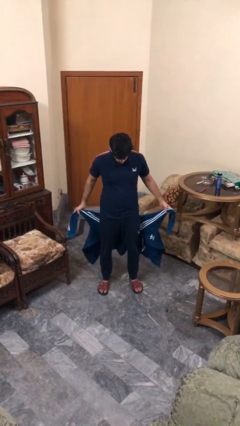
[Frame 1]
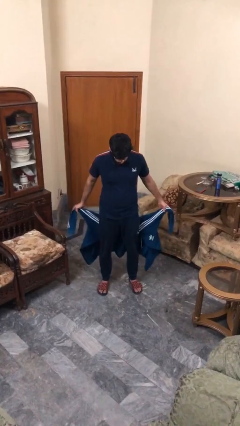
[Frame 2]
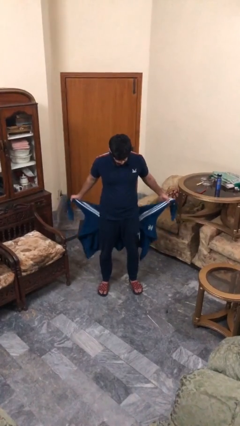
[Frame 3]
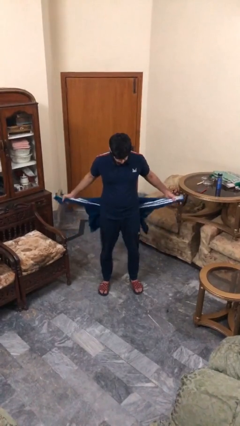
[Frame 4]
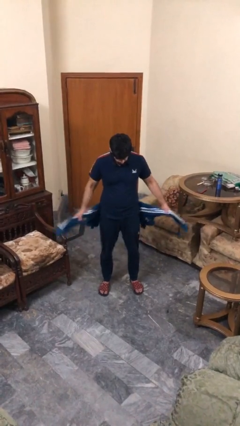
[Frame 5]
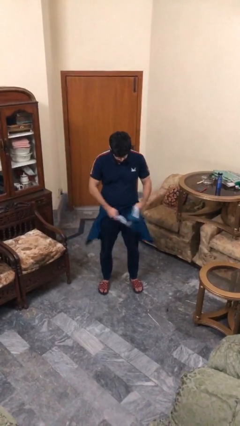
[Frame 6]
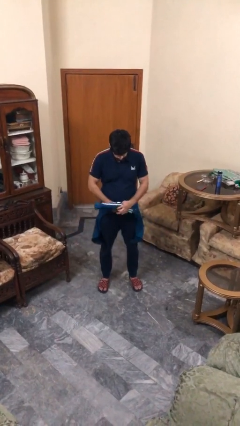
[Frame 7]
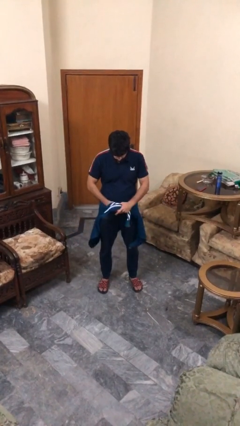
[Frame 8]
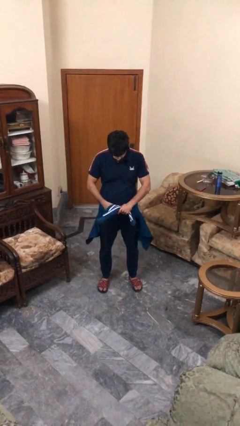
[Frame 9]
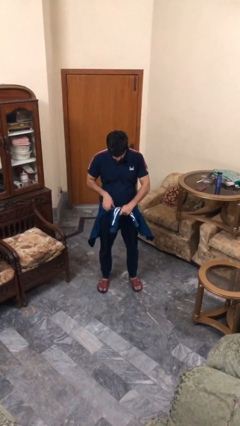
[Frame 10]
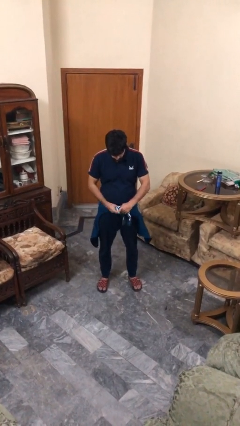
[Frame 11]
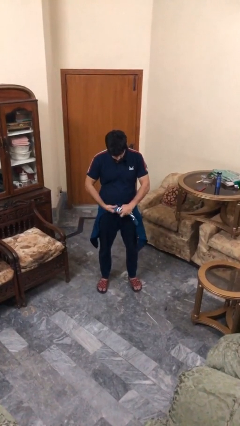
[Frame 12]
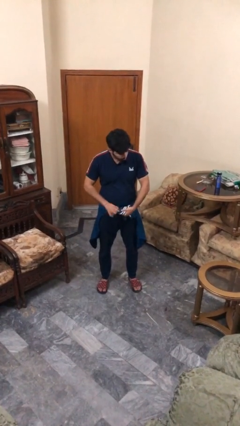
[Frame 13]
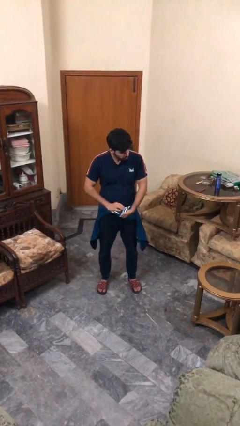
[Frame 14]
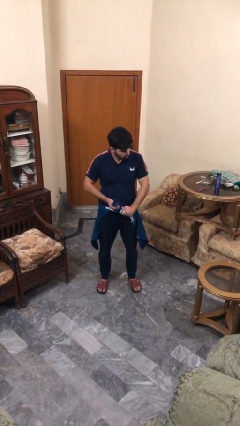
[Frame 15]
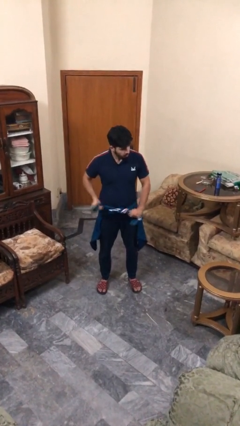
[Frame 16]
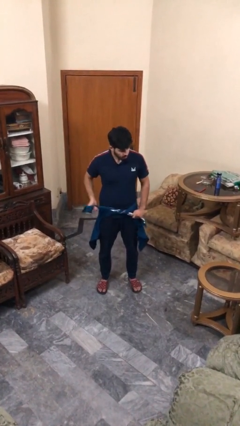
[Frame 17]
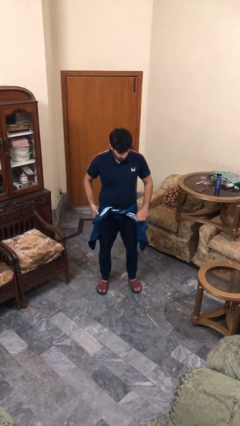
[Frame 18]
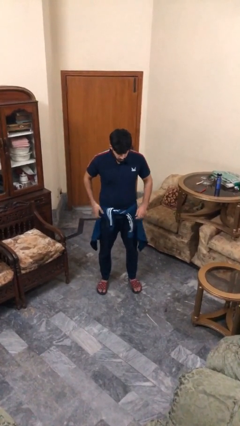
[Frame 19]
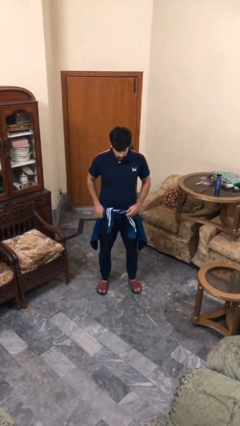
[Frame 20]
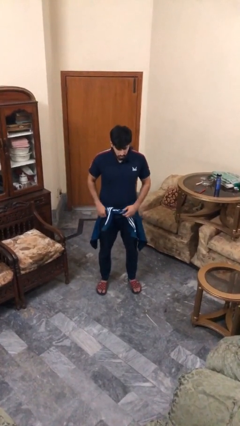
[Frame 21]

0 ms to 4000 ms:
person ties jacket around waist

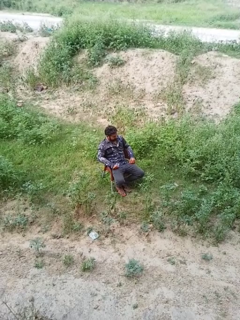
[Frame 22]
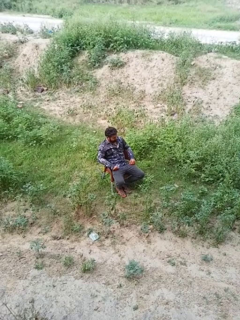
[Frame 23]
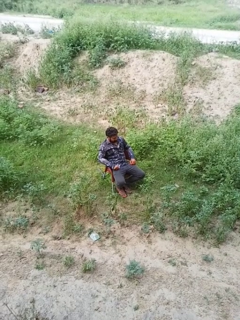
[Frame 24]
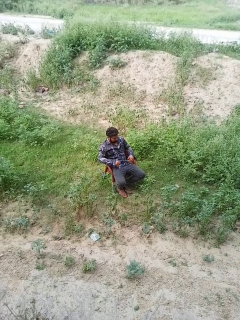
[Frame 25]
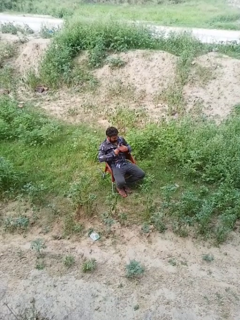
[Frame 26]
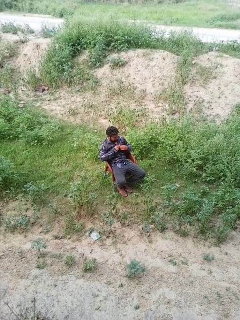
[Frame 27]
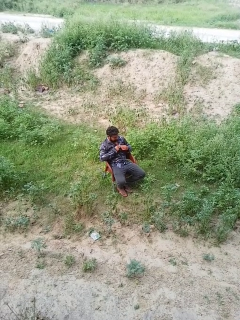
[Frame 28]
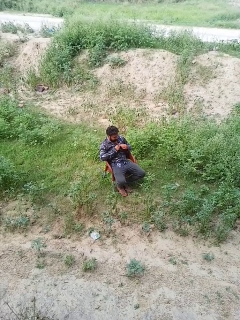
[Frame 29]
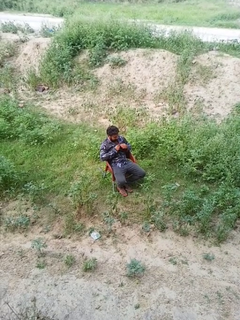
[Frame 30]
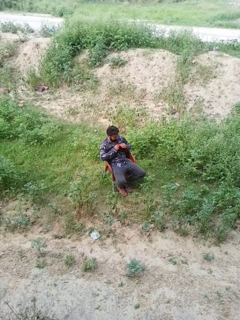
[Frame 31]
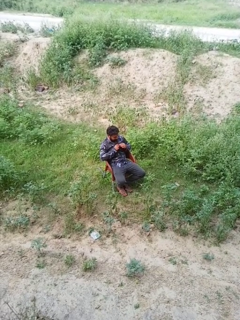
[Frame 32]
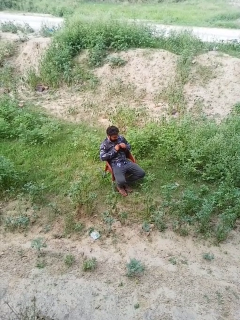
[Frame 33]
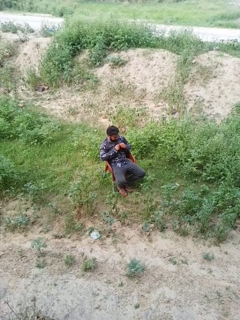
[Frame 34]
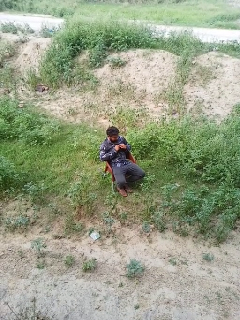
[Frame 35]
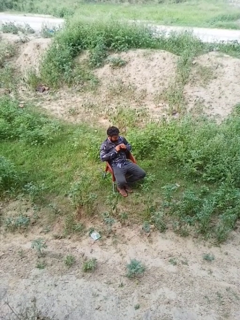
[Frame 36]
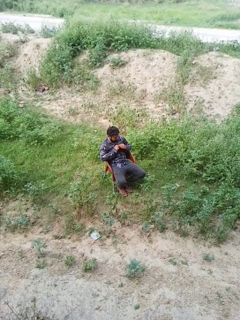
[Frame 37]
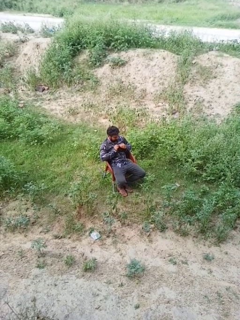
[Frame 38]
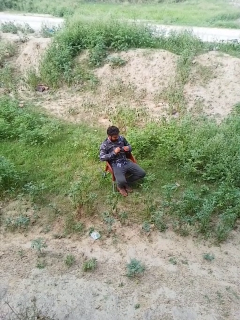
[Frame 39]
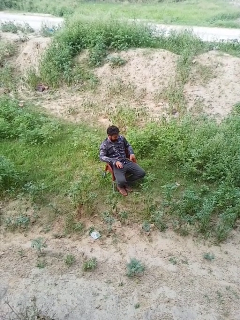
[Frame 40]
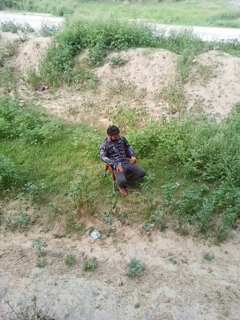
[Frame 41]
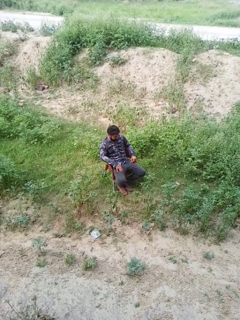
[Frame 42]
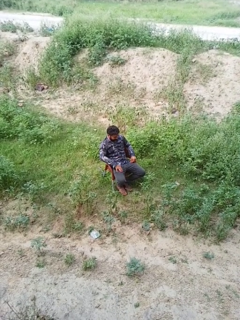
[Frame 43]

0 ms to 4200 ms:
person buttons shirt

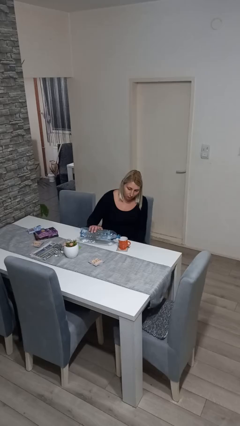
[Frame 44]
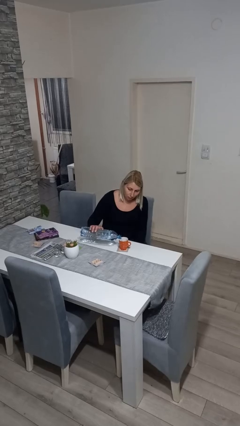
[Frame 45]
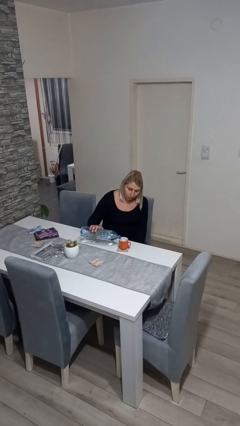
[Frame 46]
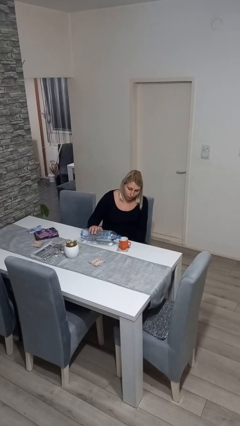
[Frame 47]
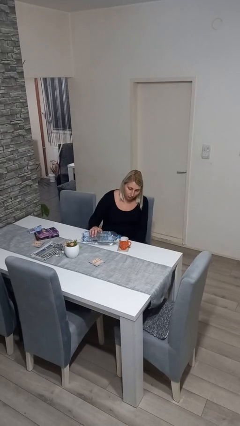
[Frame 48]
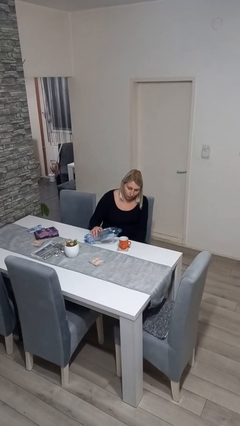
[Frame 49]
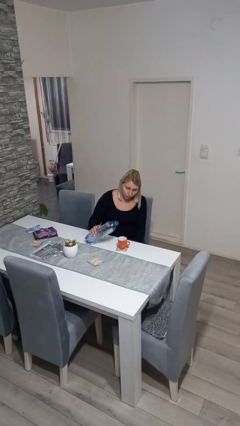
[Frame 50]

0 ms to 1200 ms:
person pours liquid into cup

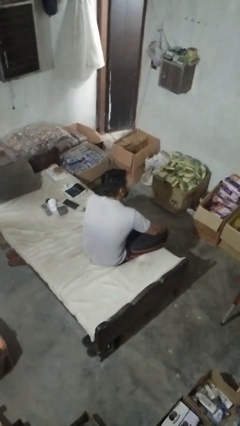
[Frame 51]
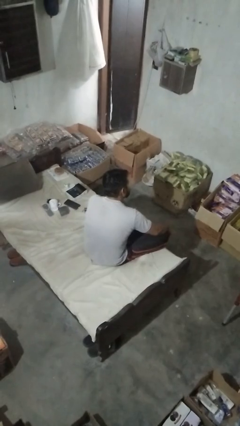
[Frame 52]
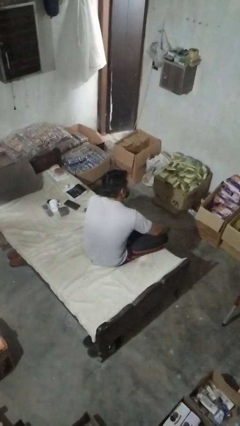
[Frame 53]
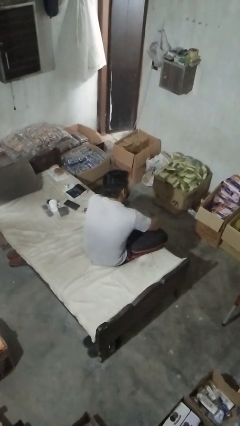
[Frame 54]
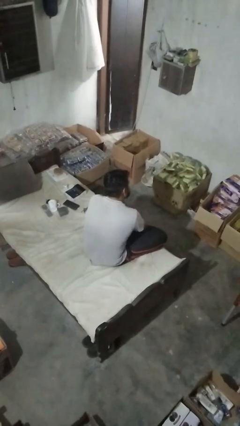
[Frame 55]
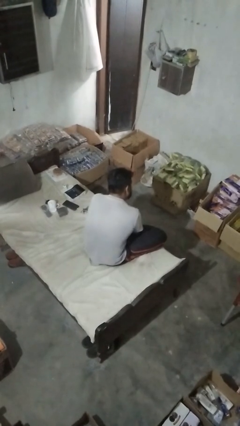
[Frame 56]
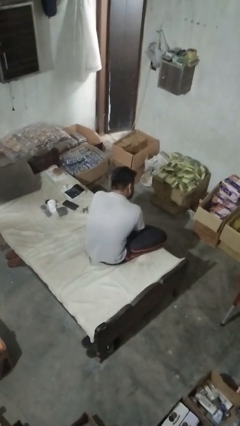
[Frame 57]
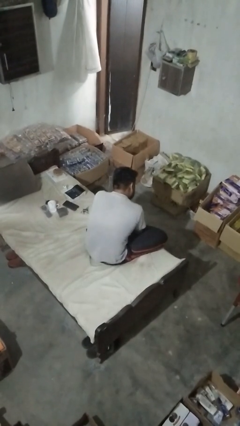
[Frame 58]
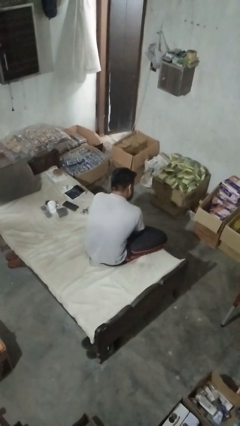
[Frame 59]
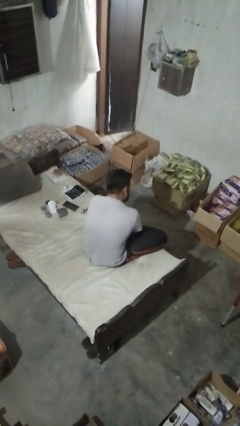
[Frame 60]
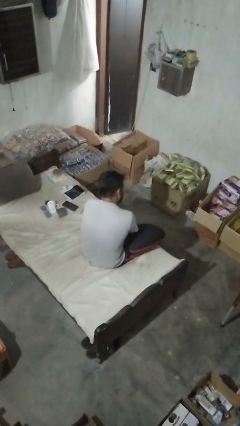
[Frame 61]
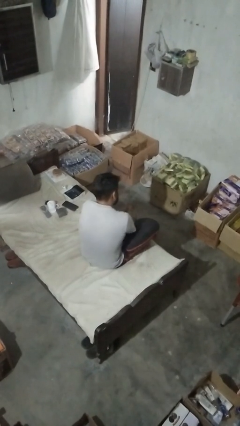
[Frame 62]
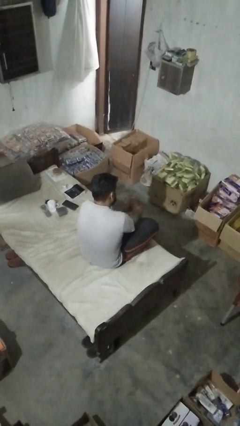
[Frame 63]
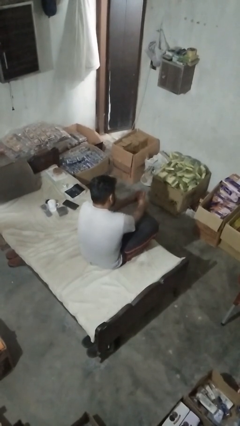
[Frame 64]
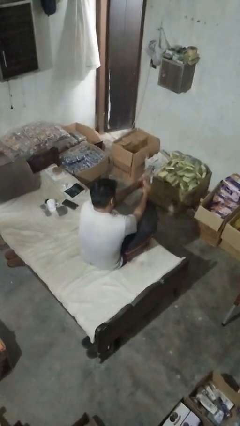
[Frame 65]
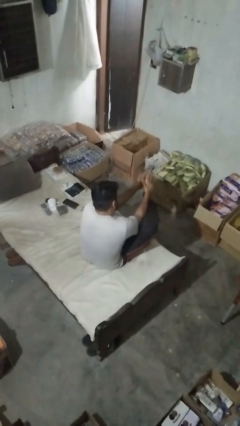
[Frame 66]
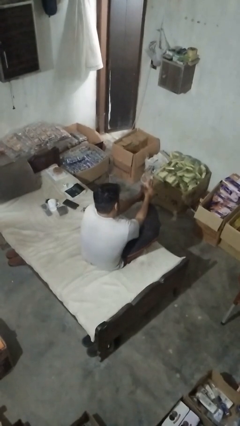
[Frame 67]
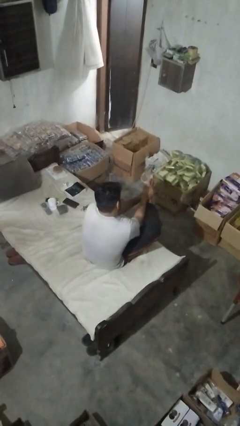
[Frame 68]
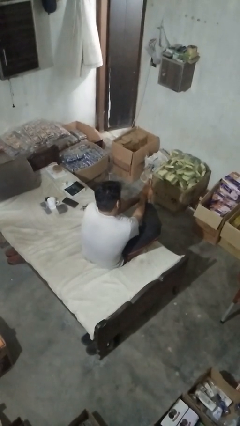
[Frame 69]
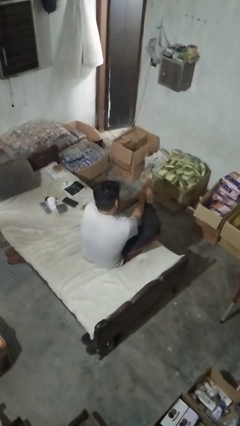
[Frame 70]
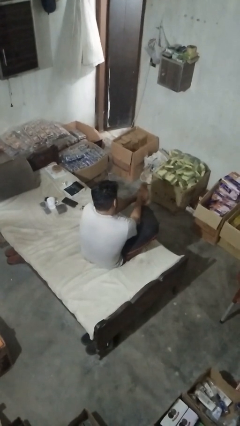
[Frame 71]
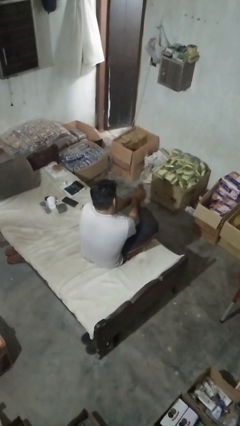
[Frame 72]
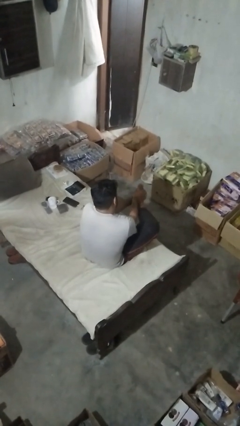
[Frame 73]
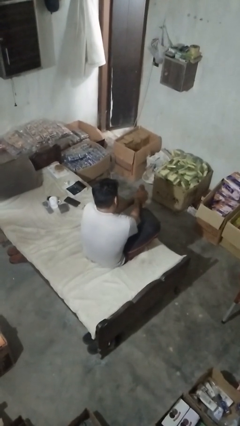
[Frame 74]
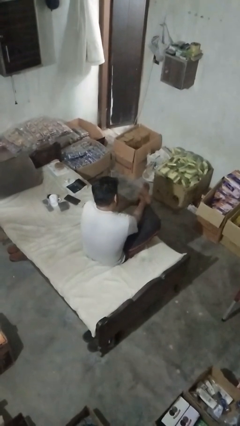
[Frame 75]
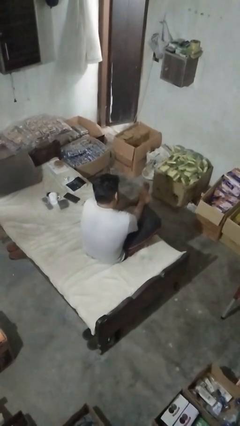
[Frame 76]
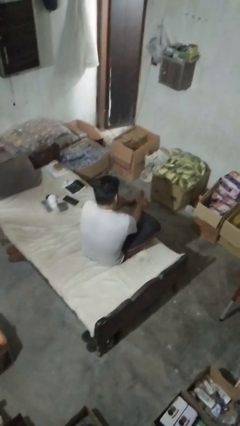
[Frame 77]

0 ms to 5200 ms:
person rubs foot

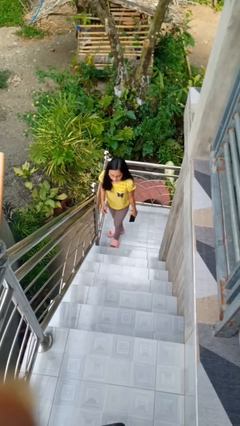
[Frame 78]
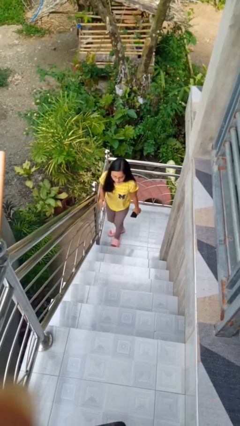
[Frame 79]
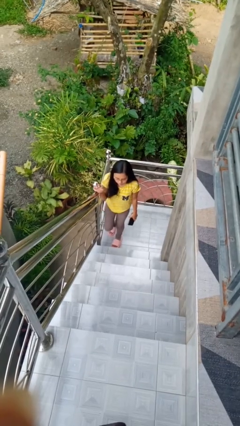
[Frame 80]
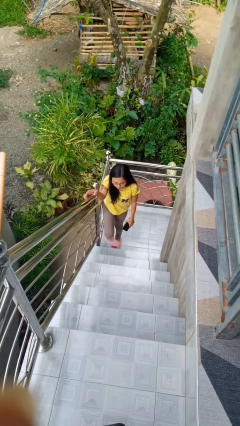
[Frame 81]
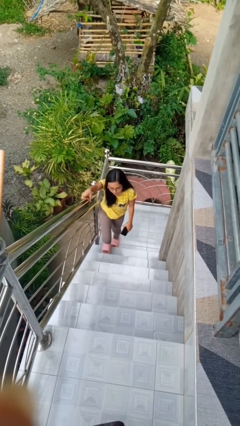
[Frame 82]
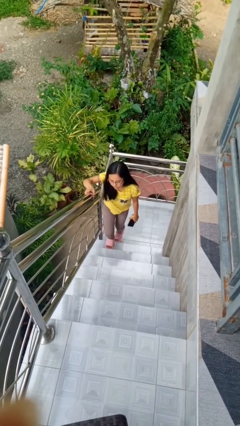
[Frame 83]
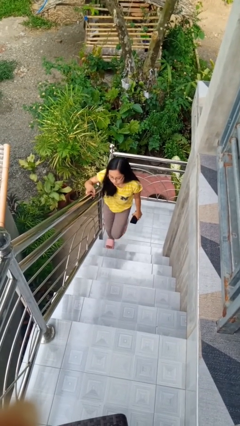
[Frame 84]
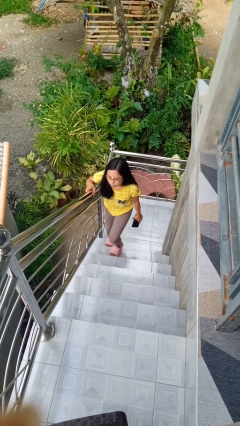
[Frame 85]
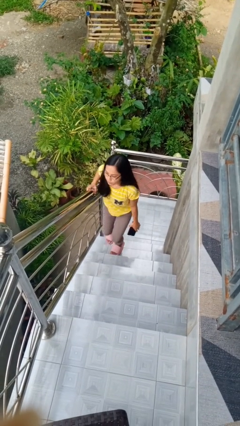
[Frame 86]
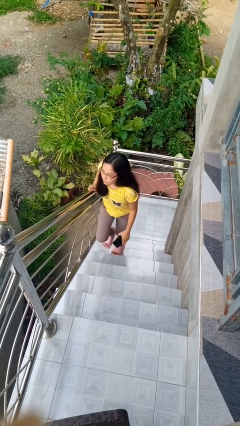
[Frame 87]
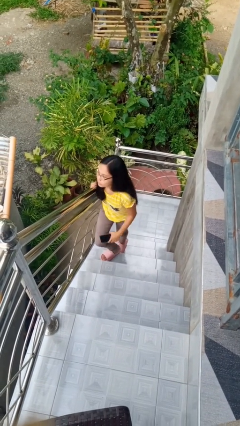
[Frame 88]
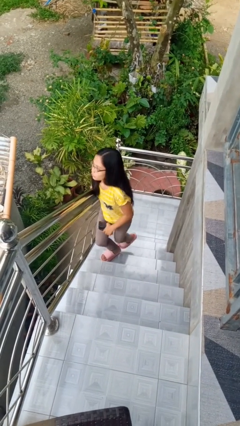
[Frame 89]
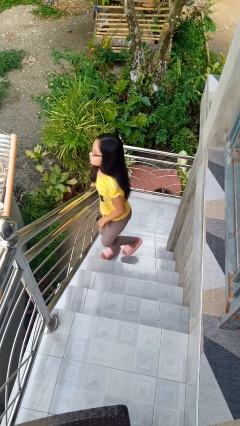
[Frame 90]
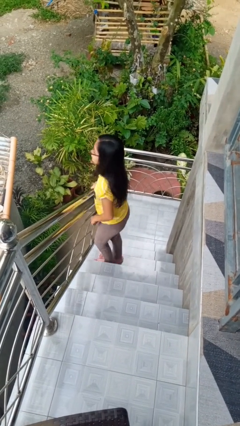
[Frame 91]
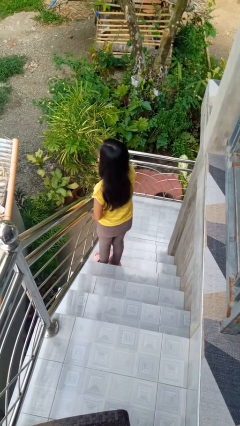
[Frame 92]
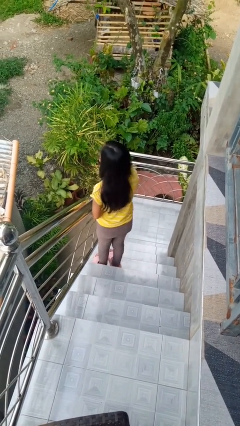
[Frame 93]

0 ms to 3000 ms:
person climbs up stairs

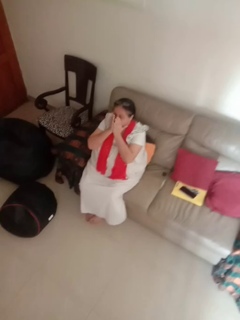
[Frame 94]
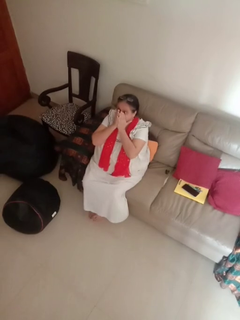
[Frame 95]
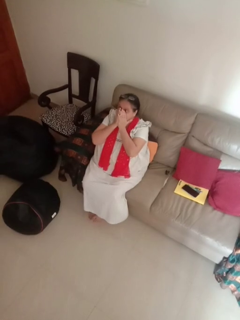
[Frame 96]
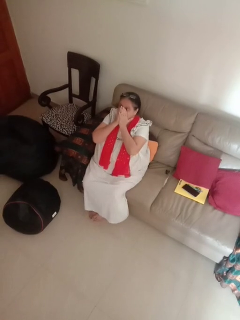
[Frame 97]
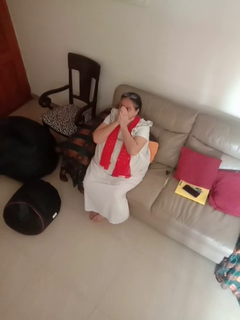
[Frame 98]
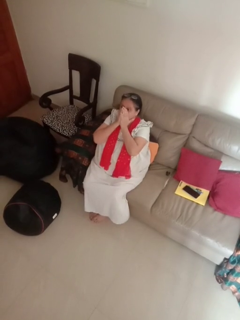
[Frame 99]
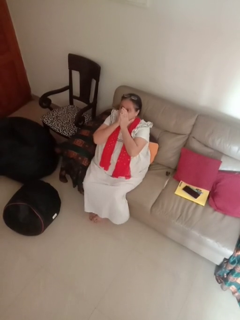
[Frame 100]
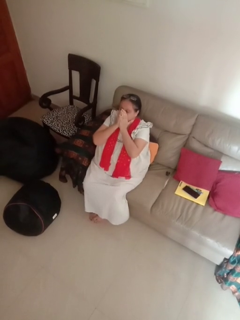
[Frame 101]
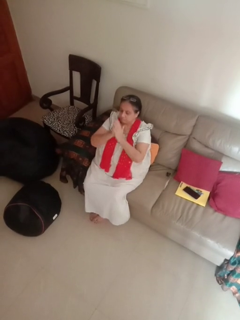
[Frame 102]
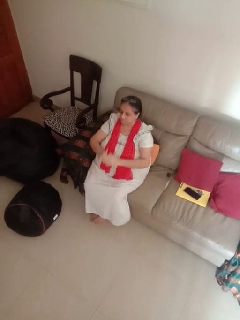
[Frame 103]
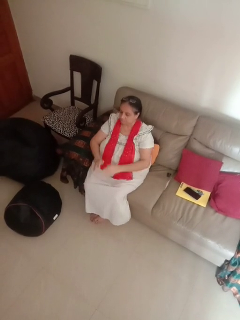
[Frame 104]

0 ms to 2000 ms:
person covers face with hands
